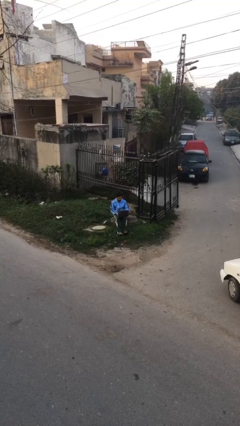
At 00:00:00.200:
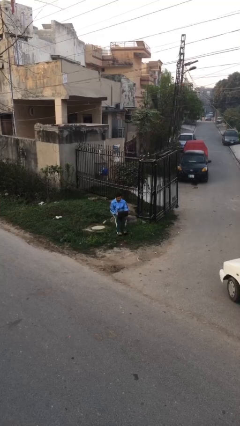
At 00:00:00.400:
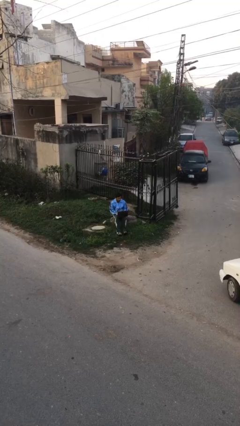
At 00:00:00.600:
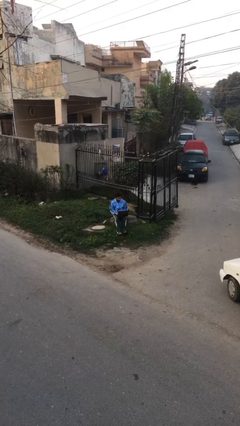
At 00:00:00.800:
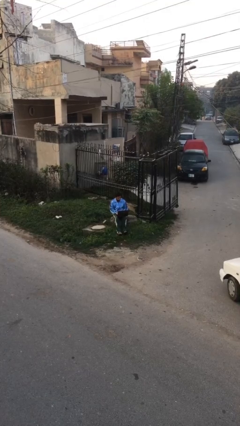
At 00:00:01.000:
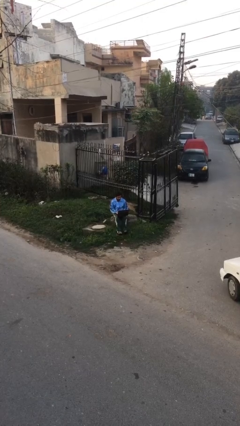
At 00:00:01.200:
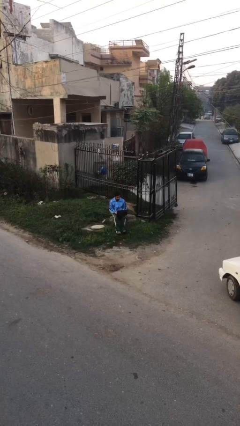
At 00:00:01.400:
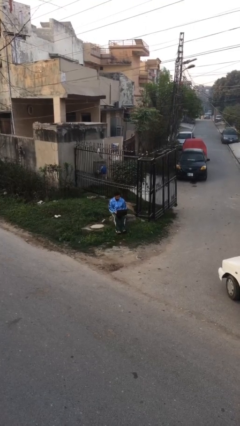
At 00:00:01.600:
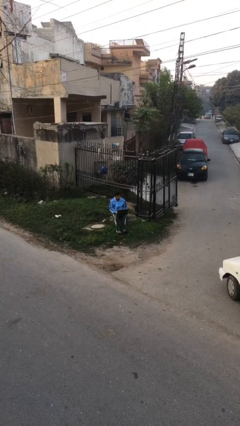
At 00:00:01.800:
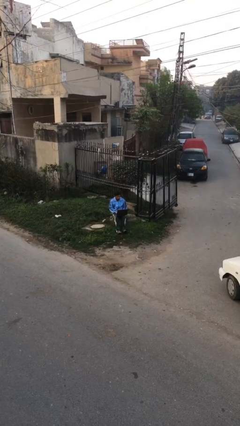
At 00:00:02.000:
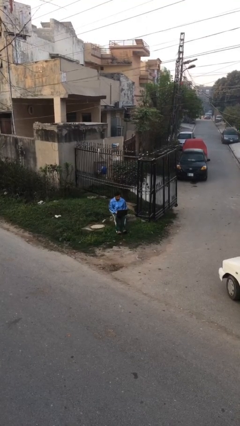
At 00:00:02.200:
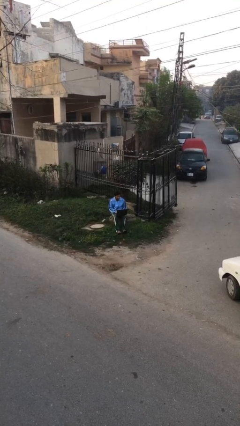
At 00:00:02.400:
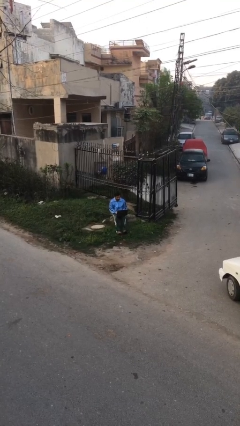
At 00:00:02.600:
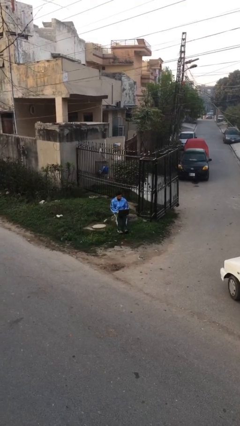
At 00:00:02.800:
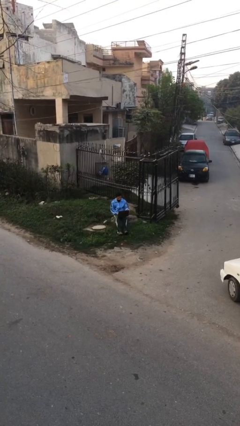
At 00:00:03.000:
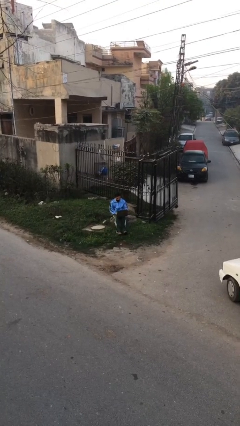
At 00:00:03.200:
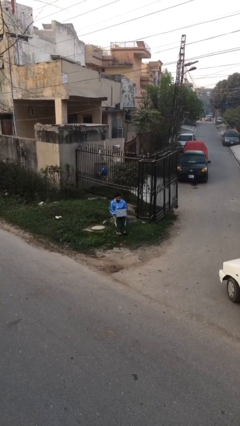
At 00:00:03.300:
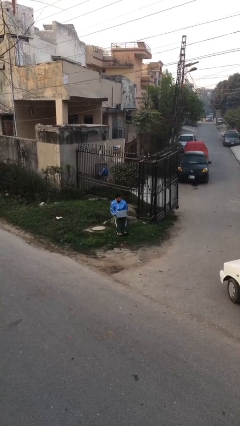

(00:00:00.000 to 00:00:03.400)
person interacts with laptop

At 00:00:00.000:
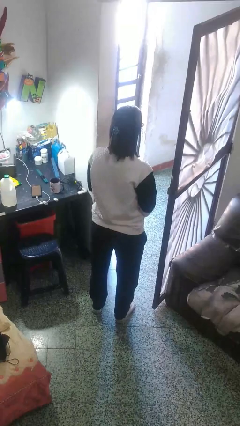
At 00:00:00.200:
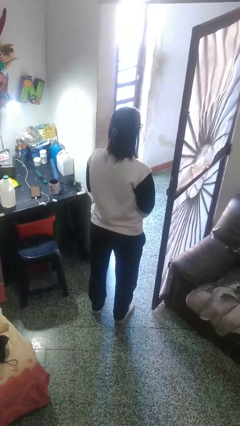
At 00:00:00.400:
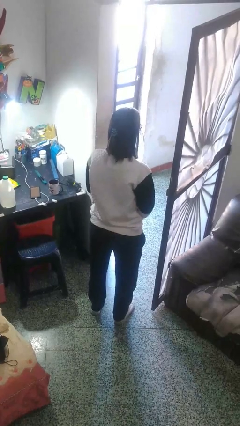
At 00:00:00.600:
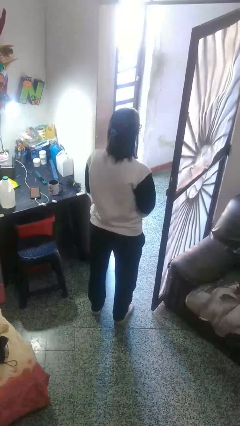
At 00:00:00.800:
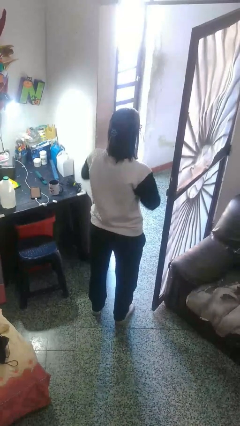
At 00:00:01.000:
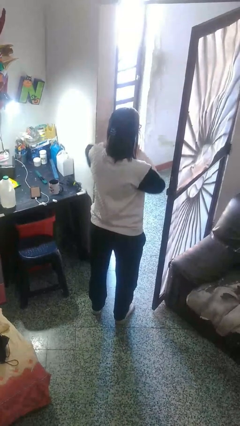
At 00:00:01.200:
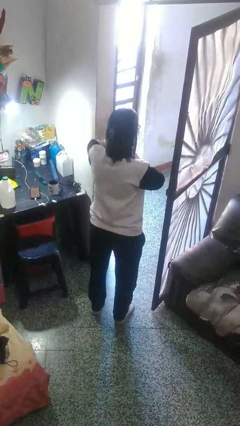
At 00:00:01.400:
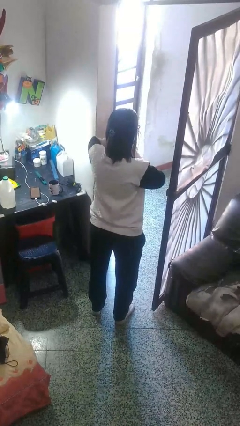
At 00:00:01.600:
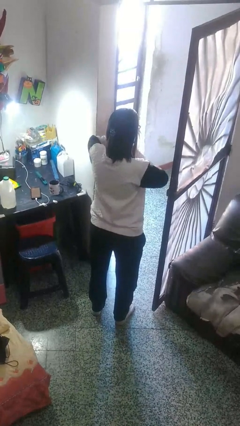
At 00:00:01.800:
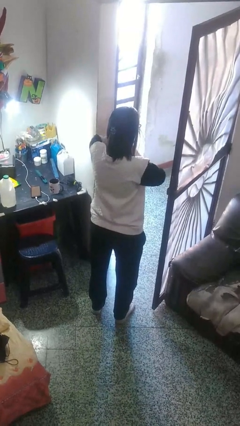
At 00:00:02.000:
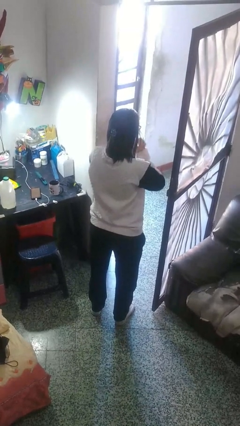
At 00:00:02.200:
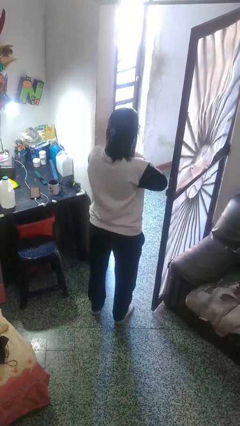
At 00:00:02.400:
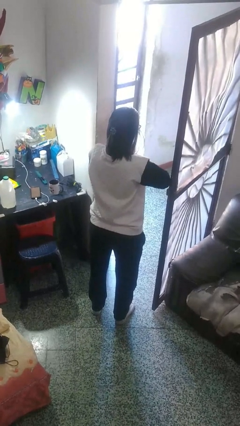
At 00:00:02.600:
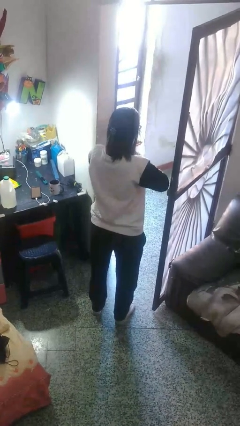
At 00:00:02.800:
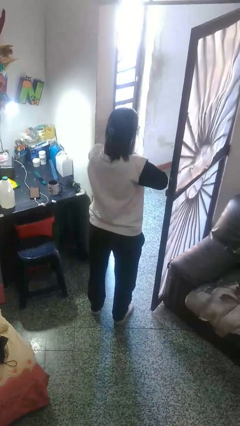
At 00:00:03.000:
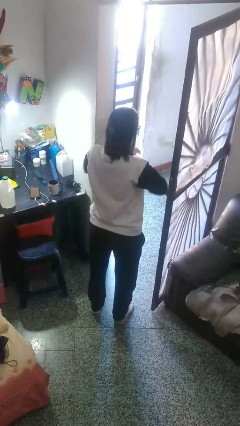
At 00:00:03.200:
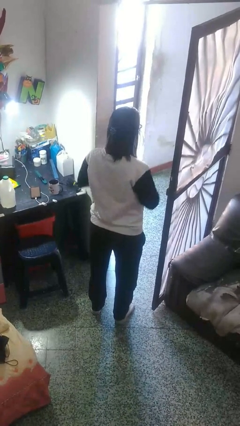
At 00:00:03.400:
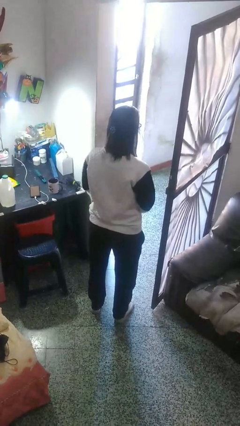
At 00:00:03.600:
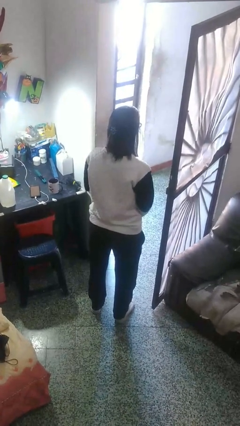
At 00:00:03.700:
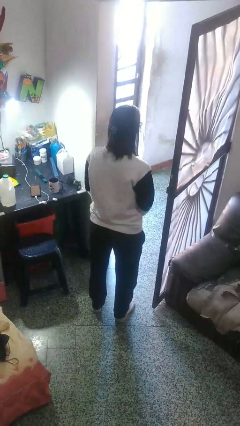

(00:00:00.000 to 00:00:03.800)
person cracks knuckles

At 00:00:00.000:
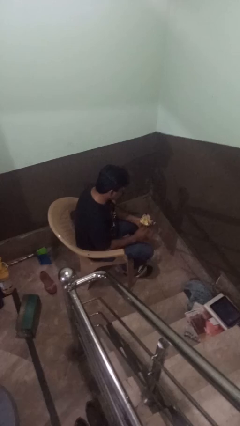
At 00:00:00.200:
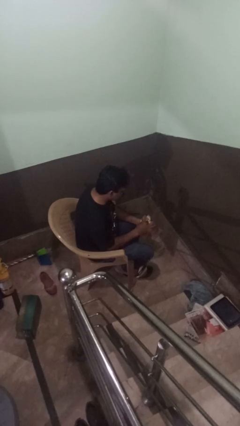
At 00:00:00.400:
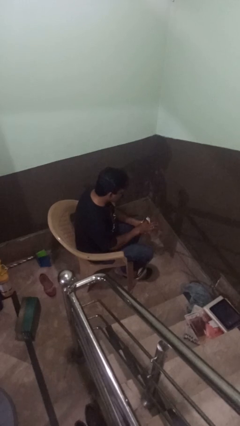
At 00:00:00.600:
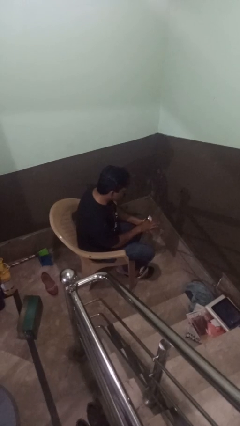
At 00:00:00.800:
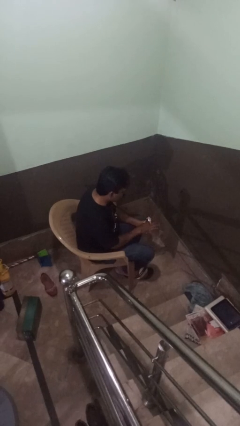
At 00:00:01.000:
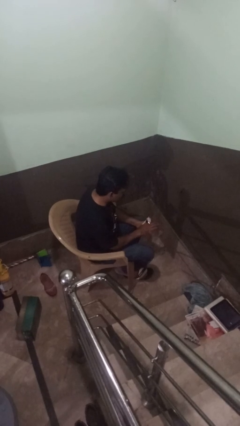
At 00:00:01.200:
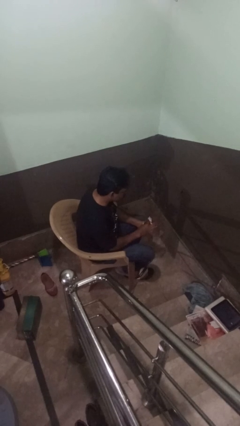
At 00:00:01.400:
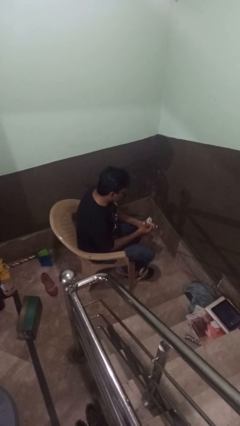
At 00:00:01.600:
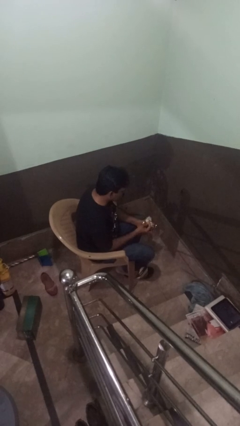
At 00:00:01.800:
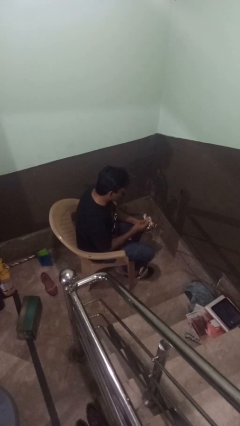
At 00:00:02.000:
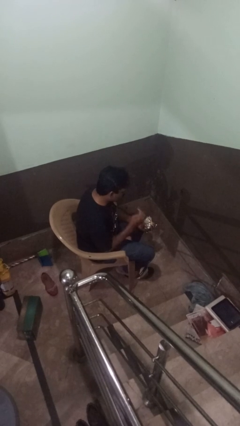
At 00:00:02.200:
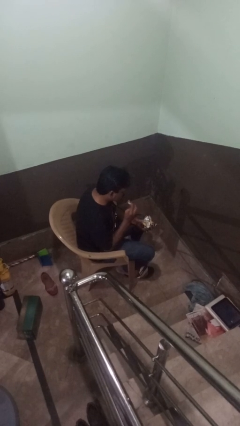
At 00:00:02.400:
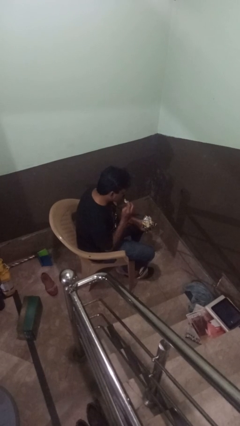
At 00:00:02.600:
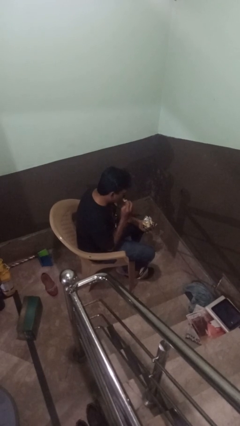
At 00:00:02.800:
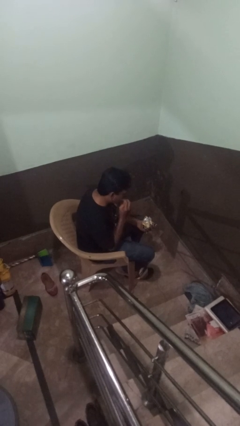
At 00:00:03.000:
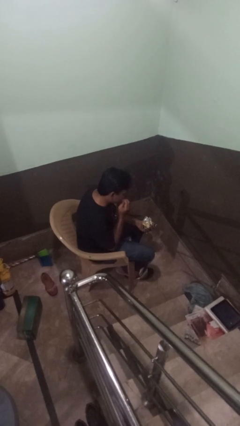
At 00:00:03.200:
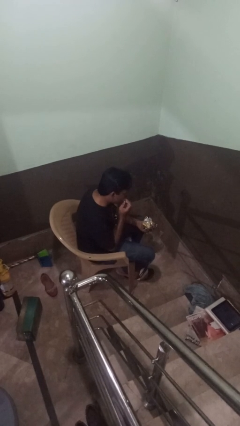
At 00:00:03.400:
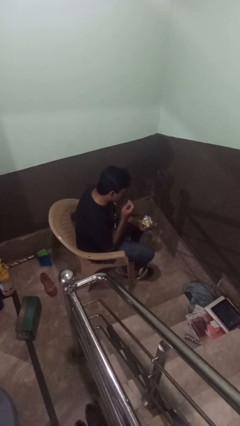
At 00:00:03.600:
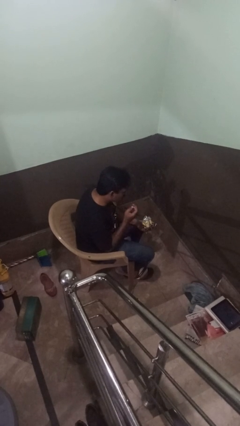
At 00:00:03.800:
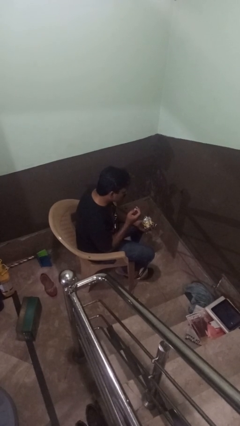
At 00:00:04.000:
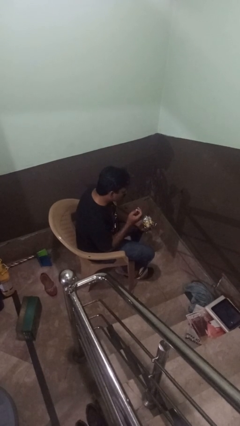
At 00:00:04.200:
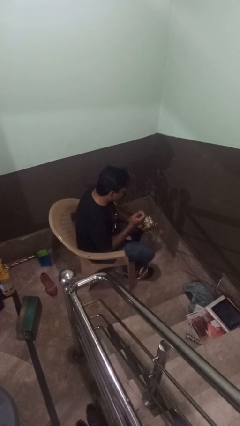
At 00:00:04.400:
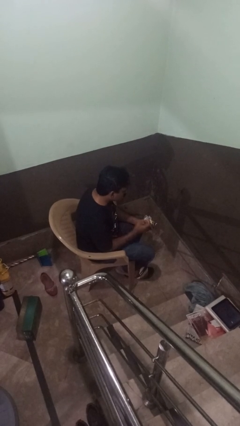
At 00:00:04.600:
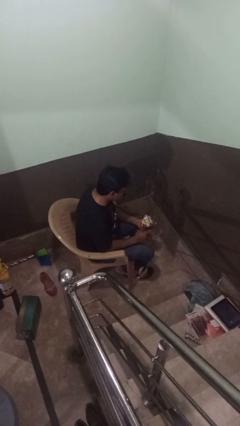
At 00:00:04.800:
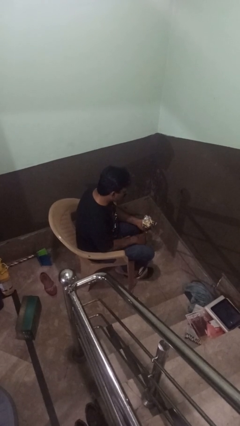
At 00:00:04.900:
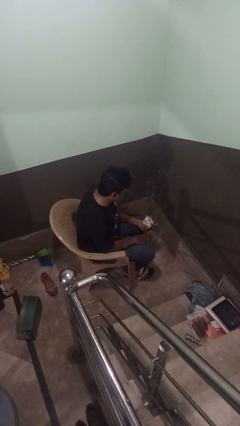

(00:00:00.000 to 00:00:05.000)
person eats snack from bag

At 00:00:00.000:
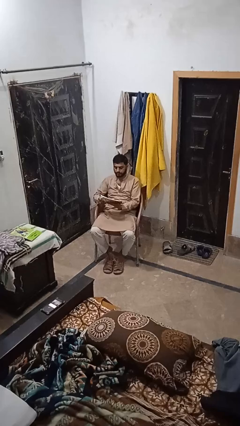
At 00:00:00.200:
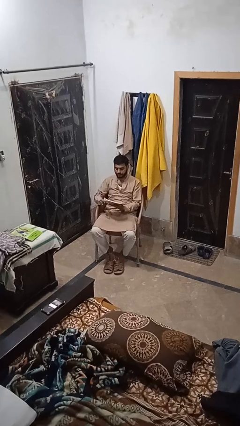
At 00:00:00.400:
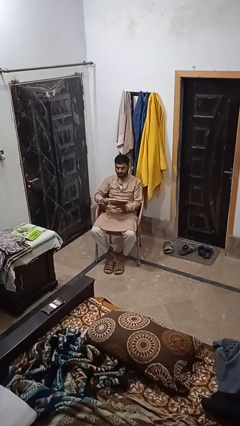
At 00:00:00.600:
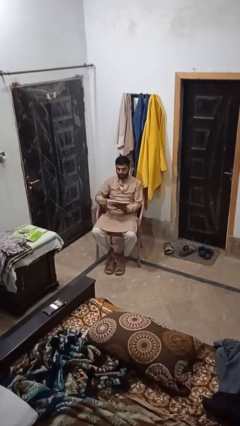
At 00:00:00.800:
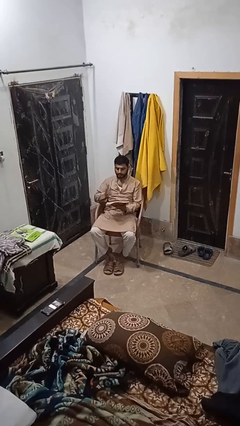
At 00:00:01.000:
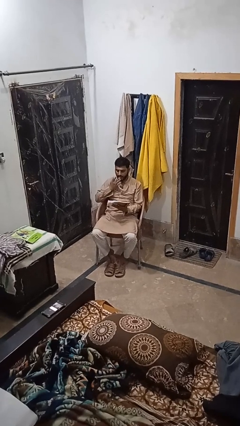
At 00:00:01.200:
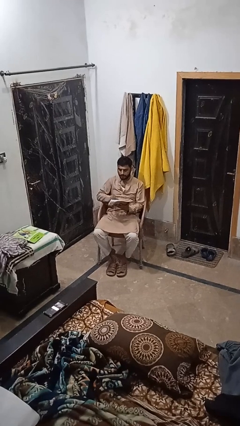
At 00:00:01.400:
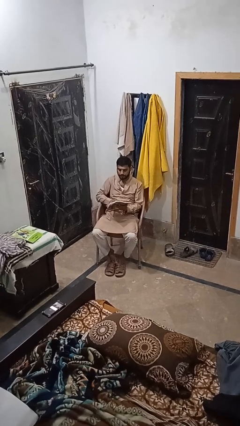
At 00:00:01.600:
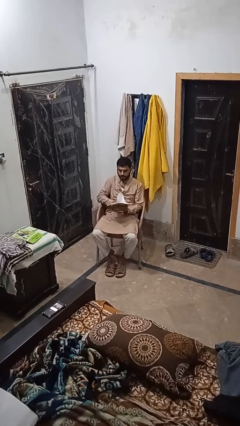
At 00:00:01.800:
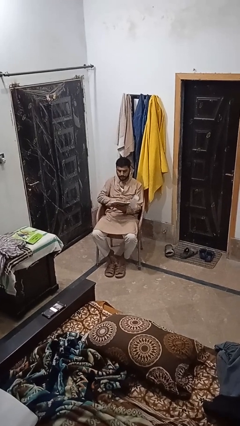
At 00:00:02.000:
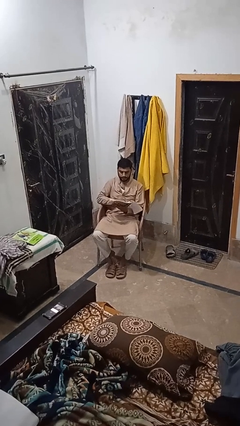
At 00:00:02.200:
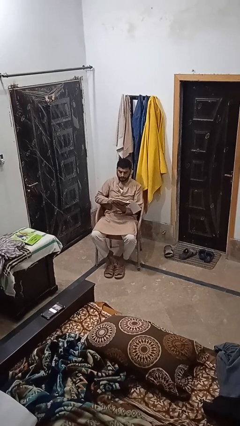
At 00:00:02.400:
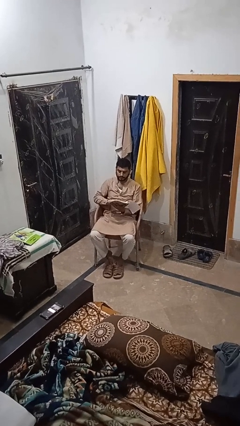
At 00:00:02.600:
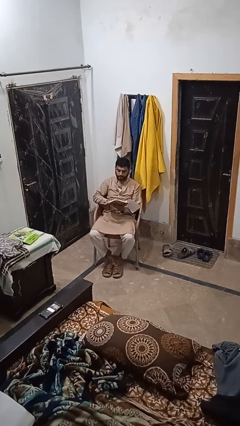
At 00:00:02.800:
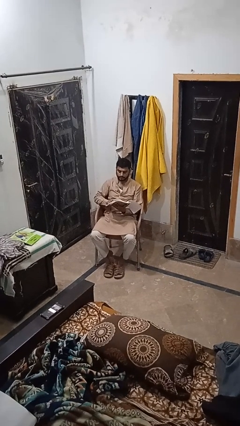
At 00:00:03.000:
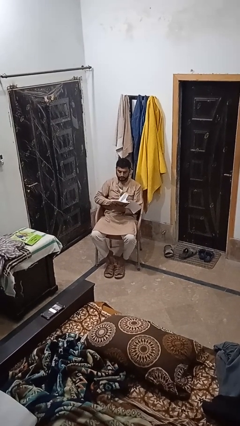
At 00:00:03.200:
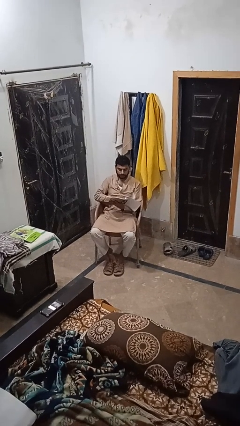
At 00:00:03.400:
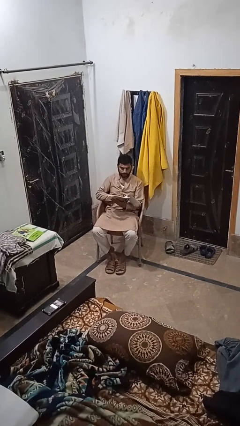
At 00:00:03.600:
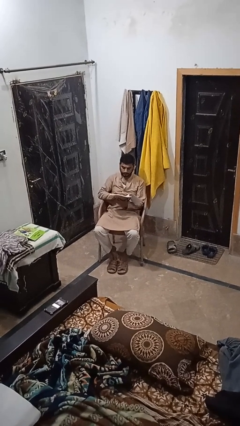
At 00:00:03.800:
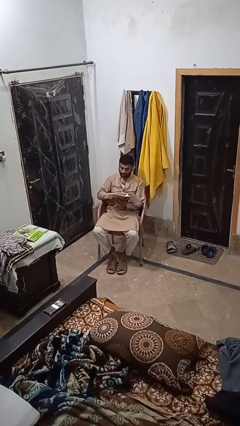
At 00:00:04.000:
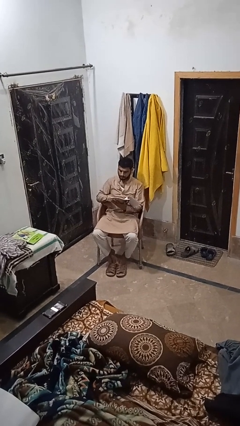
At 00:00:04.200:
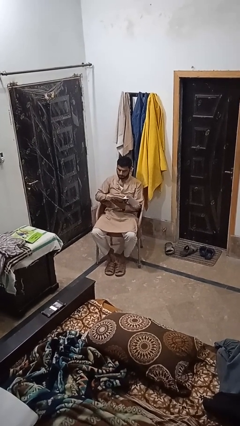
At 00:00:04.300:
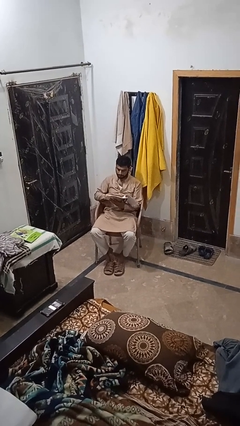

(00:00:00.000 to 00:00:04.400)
person reads book

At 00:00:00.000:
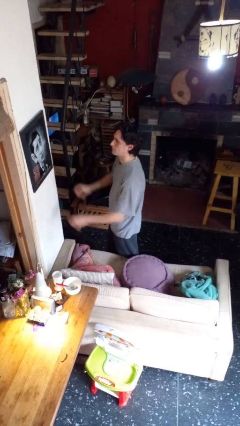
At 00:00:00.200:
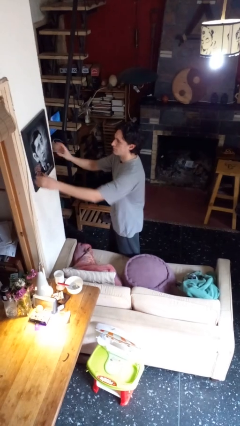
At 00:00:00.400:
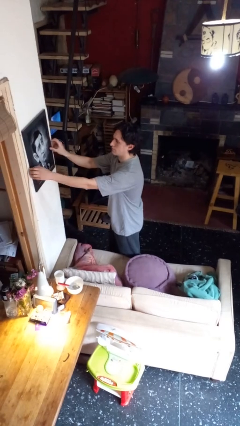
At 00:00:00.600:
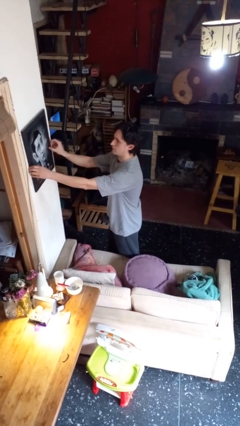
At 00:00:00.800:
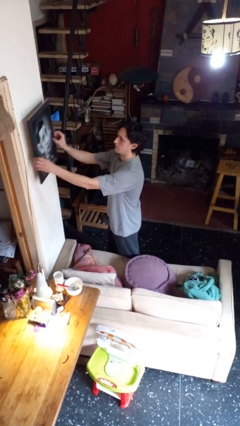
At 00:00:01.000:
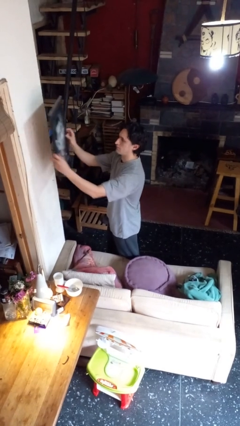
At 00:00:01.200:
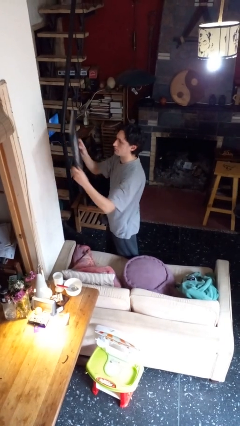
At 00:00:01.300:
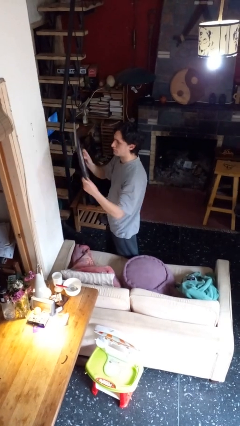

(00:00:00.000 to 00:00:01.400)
person takes down picture frame
